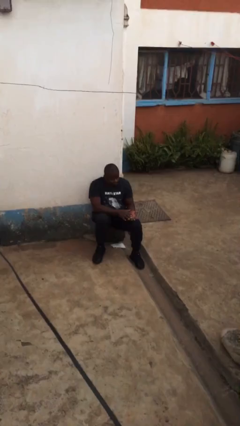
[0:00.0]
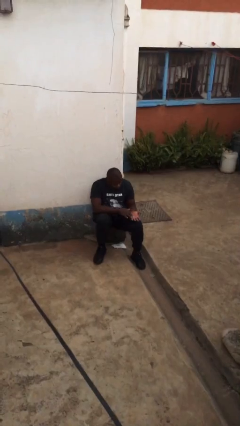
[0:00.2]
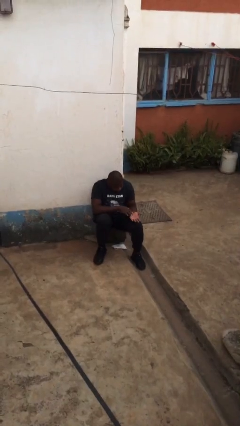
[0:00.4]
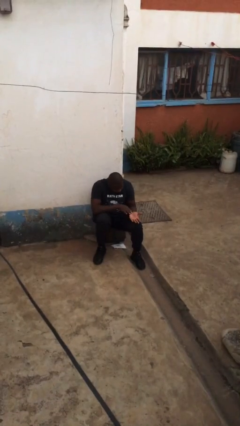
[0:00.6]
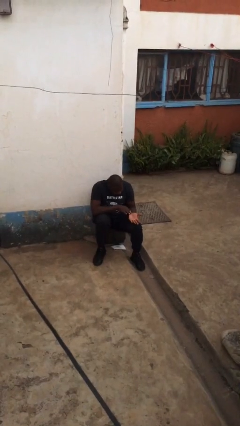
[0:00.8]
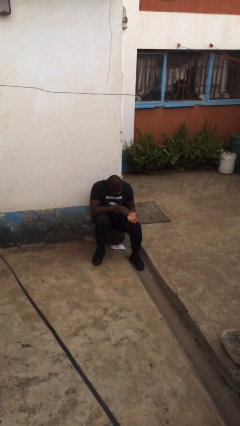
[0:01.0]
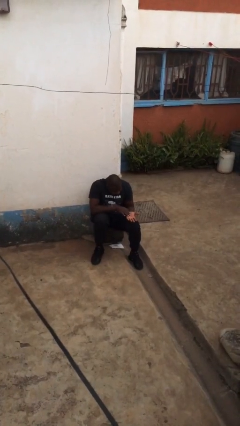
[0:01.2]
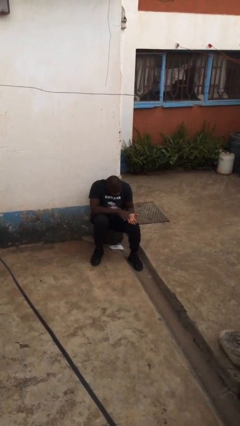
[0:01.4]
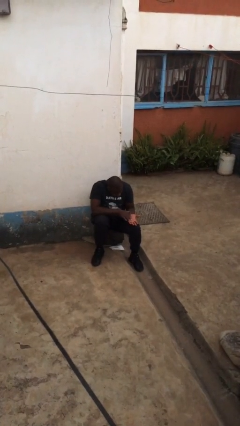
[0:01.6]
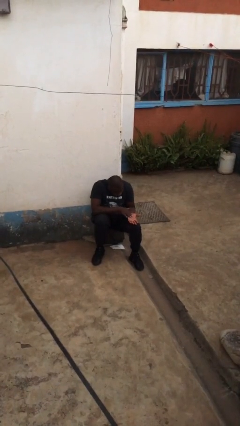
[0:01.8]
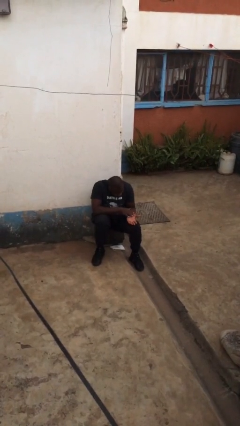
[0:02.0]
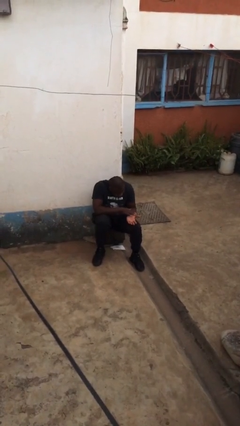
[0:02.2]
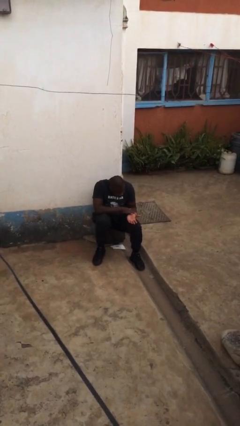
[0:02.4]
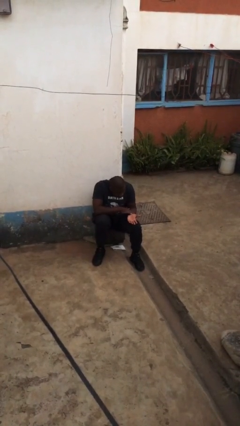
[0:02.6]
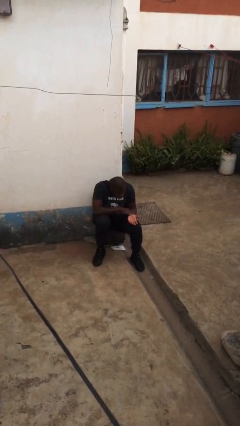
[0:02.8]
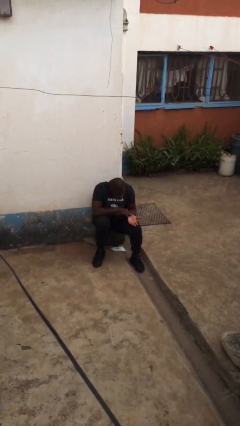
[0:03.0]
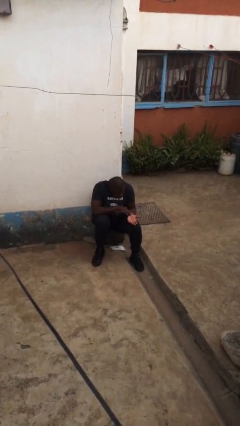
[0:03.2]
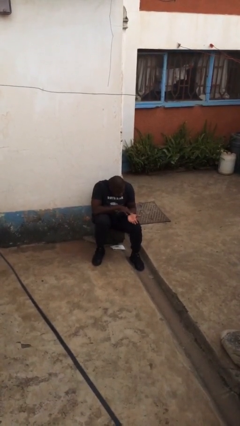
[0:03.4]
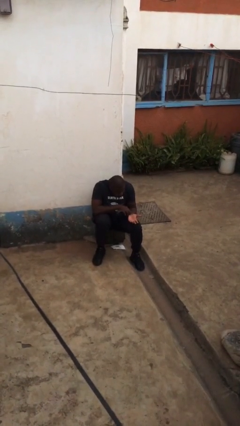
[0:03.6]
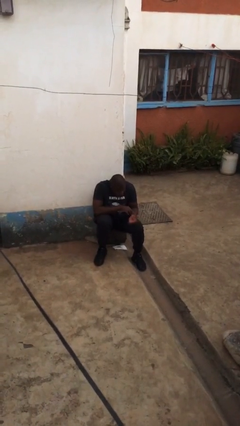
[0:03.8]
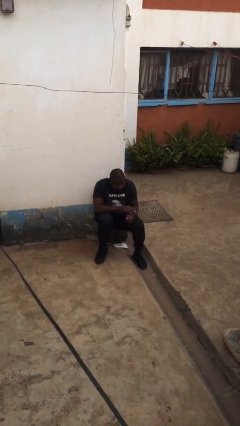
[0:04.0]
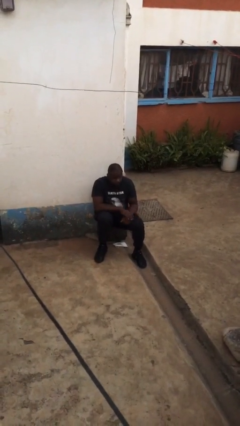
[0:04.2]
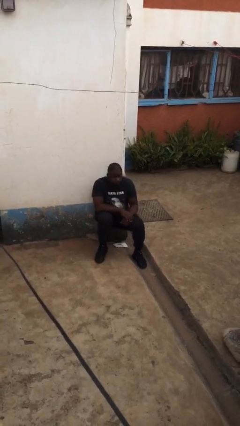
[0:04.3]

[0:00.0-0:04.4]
person looks at hands in lap

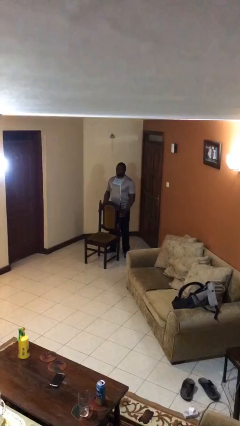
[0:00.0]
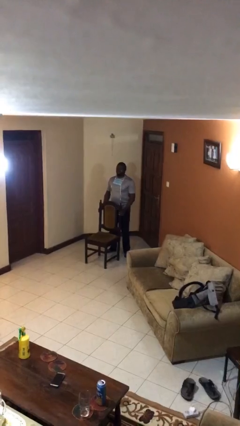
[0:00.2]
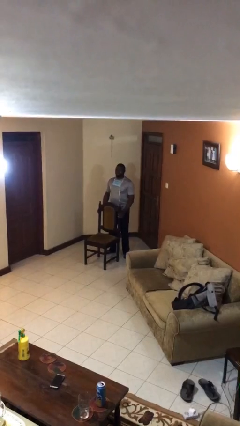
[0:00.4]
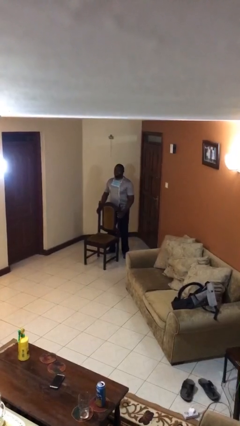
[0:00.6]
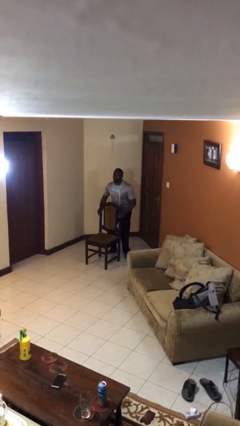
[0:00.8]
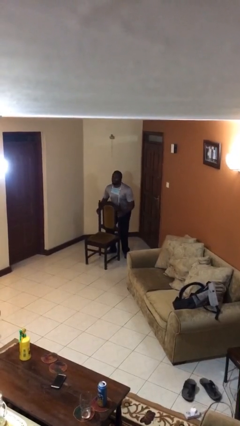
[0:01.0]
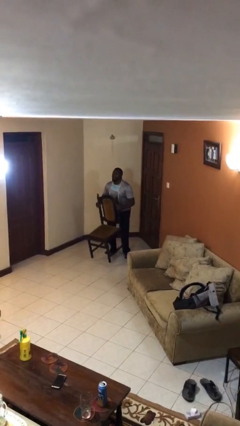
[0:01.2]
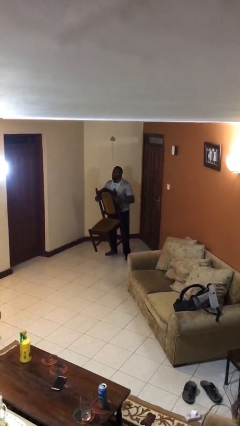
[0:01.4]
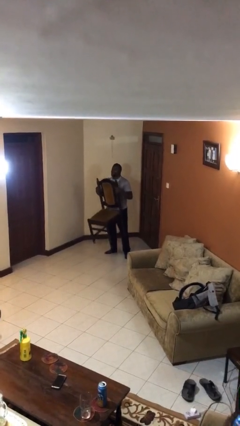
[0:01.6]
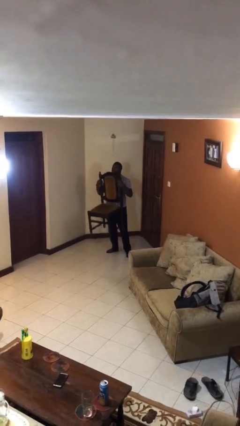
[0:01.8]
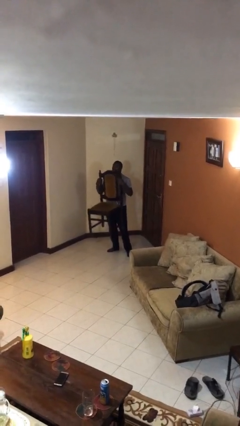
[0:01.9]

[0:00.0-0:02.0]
person picks up object from floor

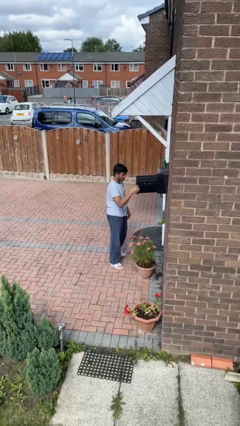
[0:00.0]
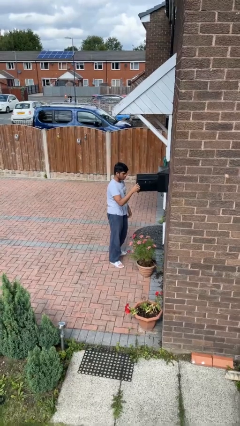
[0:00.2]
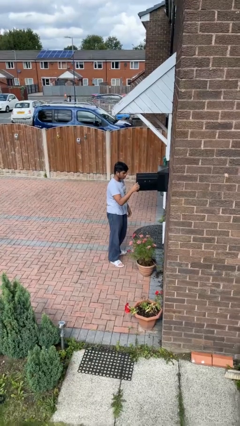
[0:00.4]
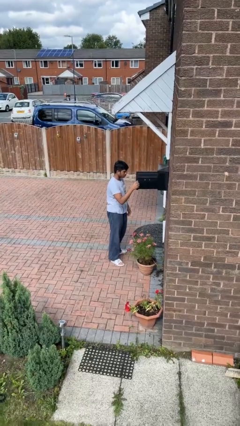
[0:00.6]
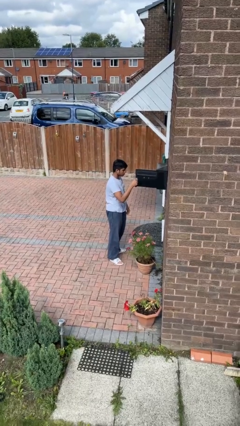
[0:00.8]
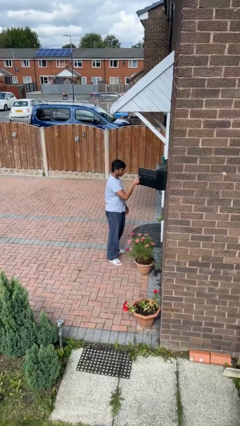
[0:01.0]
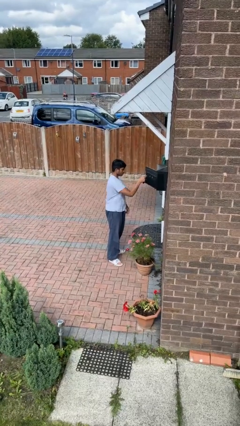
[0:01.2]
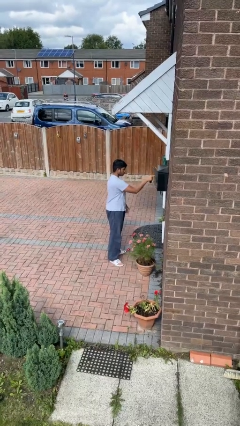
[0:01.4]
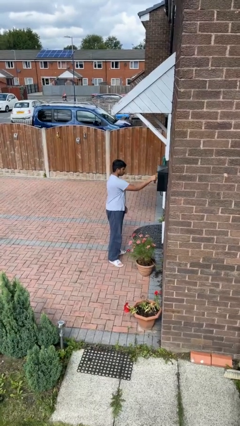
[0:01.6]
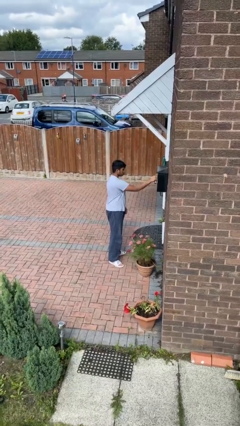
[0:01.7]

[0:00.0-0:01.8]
person closes mailbox

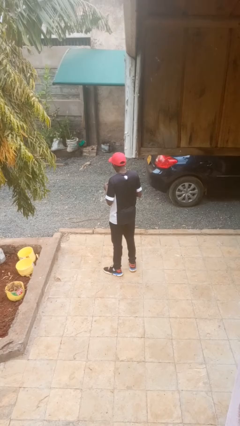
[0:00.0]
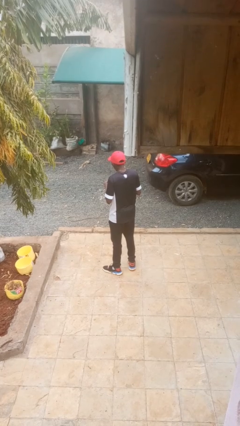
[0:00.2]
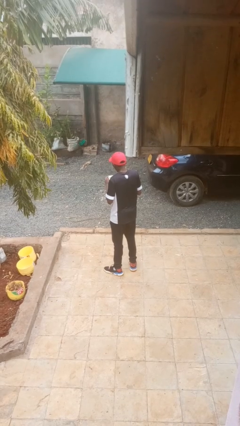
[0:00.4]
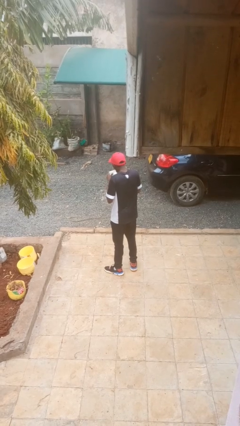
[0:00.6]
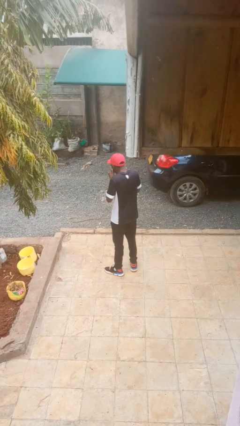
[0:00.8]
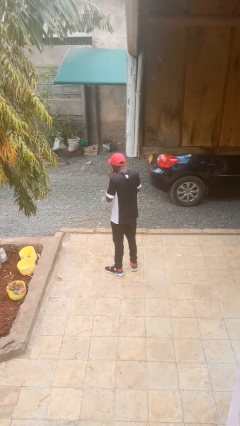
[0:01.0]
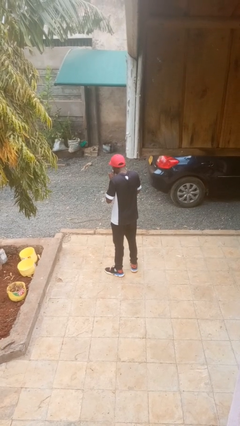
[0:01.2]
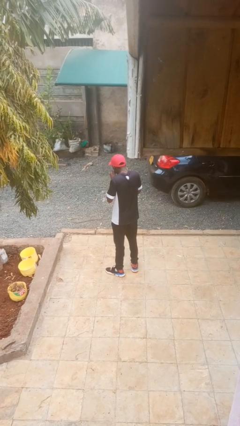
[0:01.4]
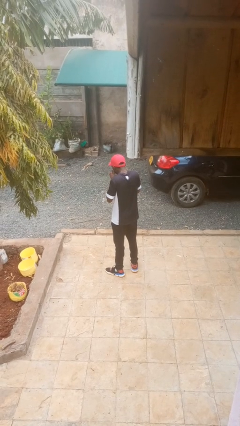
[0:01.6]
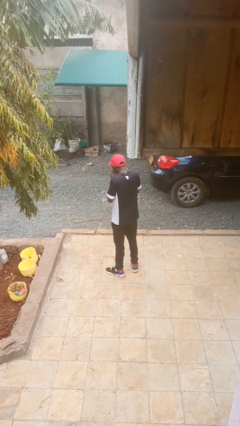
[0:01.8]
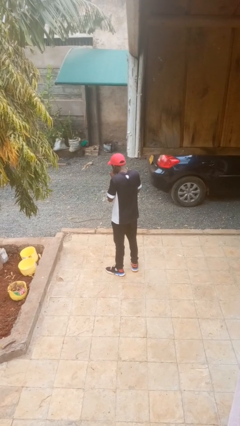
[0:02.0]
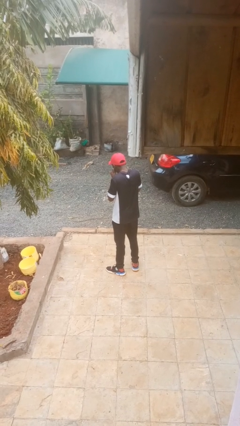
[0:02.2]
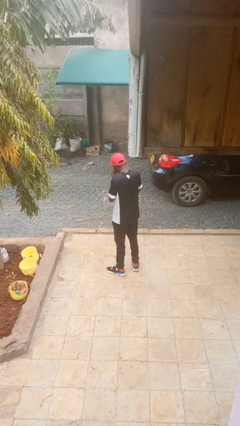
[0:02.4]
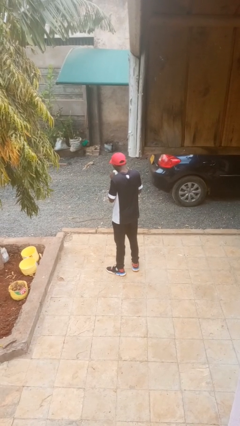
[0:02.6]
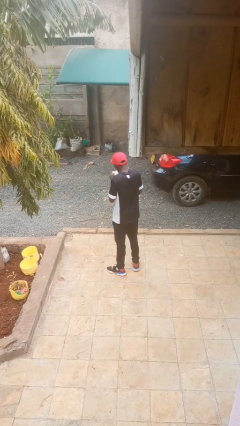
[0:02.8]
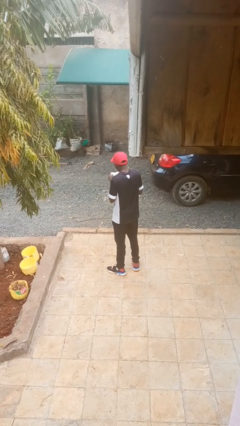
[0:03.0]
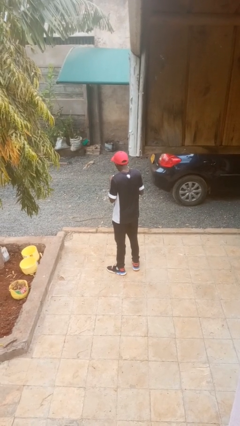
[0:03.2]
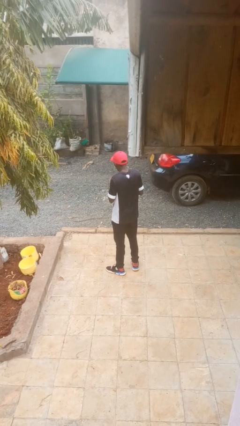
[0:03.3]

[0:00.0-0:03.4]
person blows nose

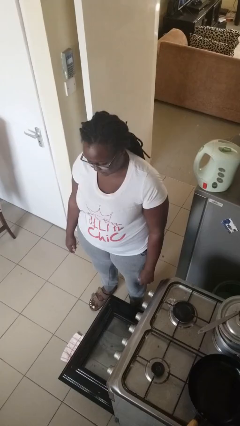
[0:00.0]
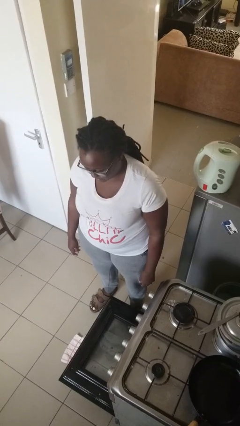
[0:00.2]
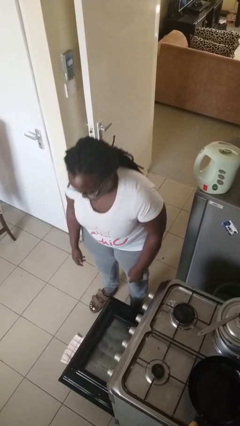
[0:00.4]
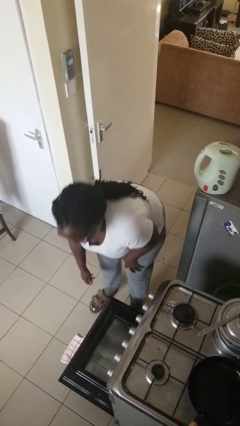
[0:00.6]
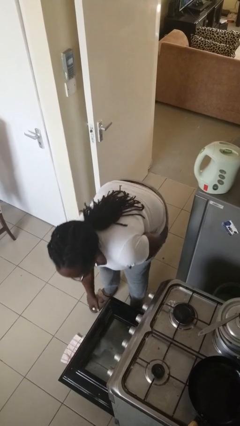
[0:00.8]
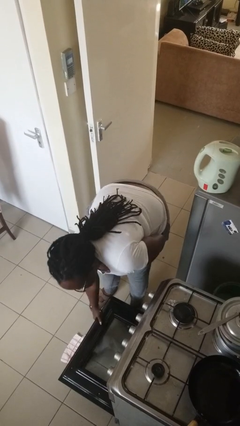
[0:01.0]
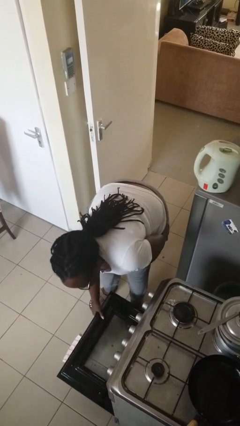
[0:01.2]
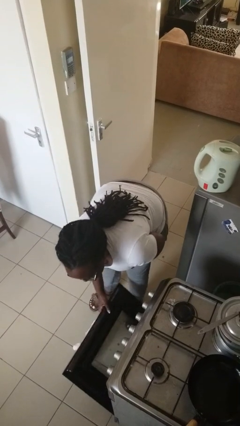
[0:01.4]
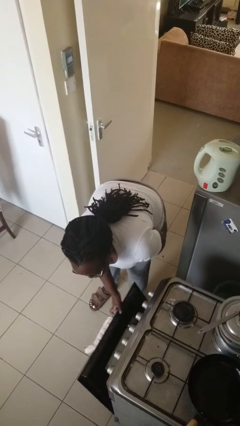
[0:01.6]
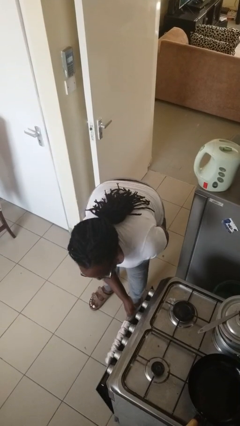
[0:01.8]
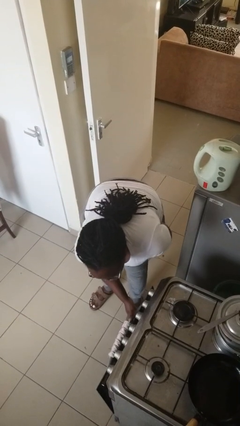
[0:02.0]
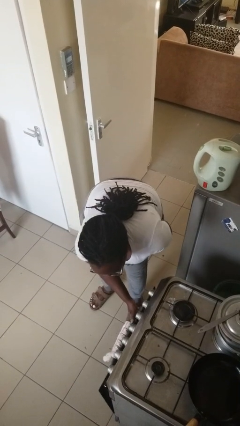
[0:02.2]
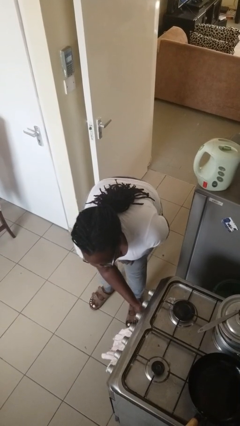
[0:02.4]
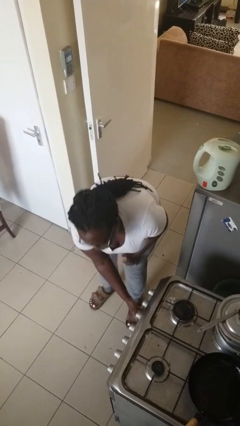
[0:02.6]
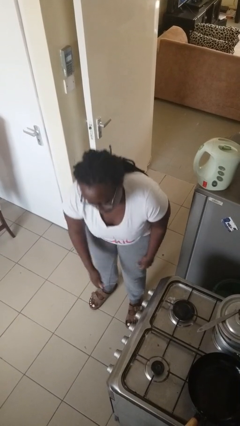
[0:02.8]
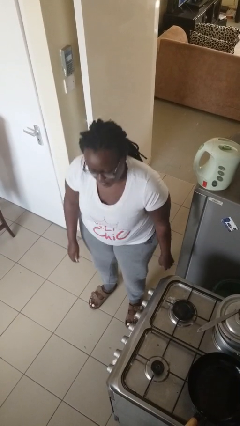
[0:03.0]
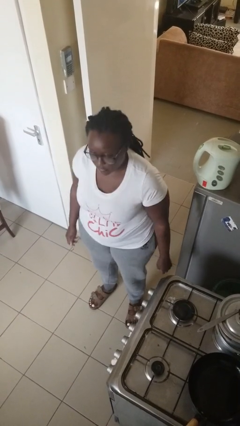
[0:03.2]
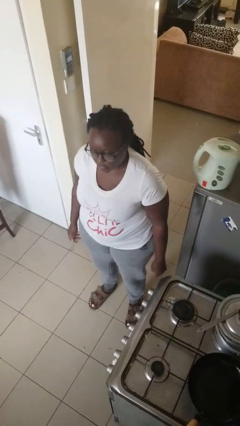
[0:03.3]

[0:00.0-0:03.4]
person closes oven door

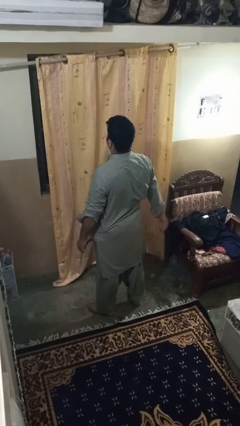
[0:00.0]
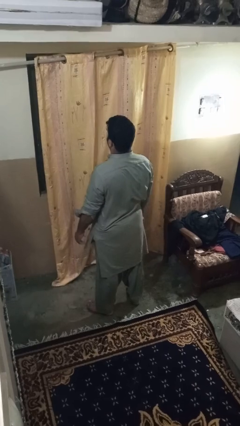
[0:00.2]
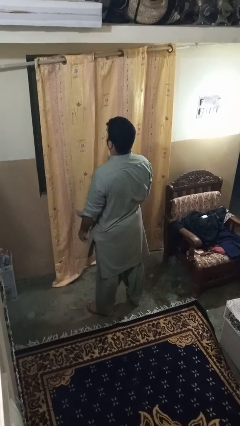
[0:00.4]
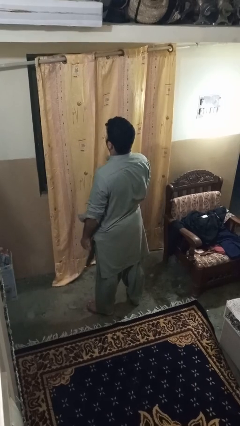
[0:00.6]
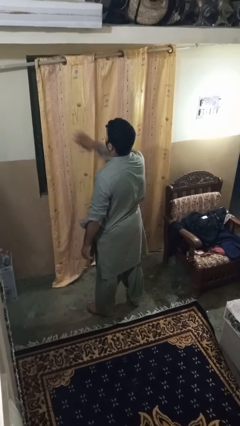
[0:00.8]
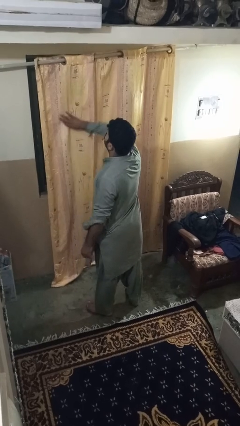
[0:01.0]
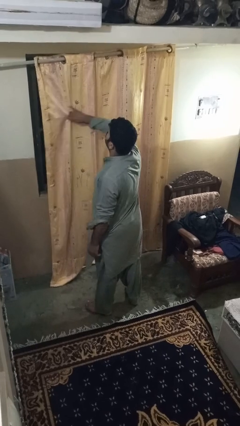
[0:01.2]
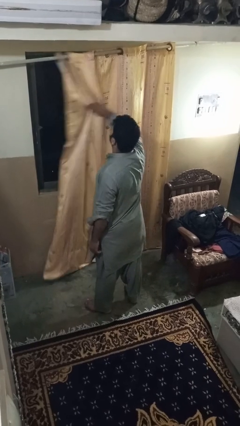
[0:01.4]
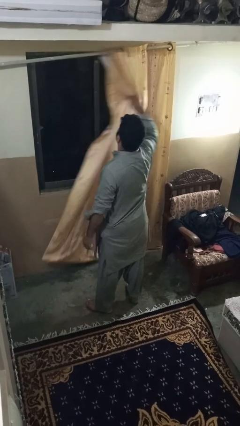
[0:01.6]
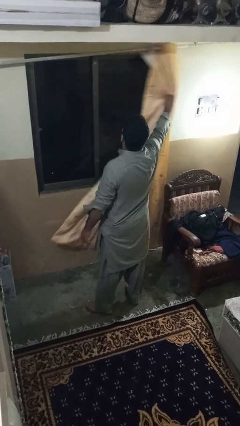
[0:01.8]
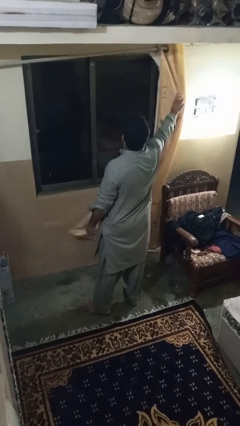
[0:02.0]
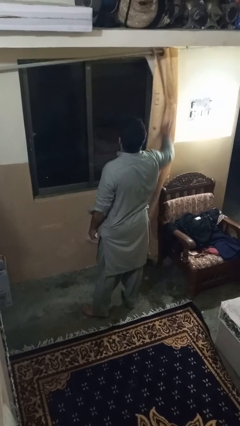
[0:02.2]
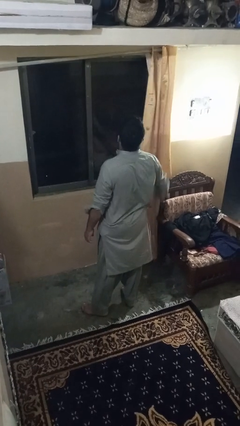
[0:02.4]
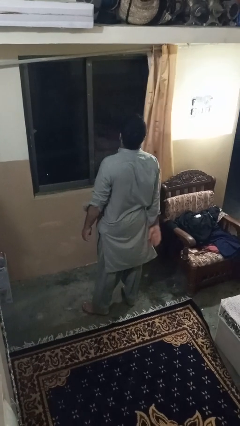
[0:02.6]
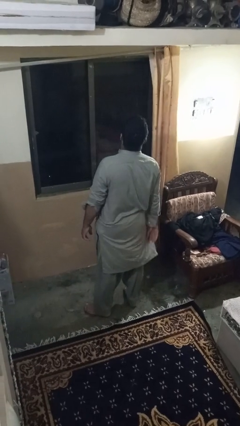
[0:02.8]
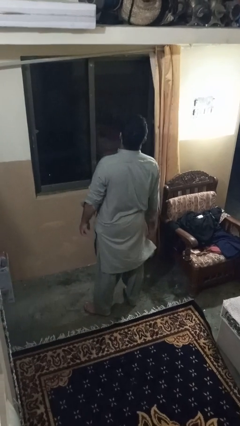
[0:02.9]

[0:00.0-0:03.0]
person opens curtains
